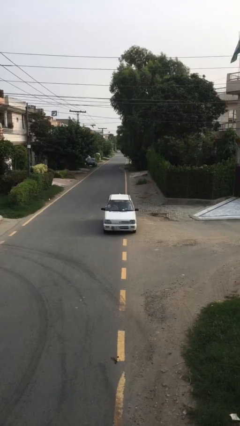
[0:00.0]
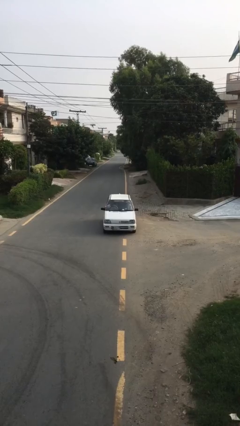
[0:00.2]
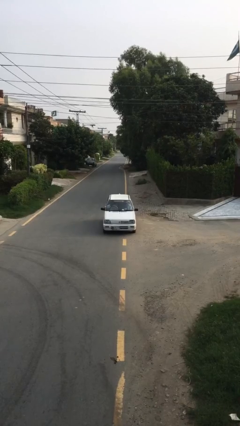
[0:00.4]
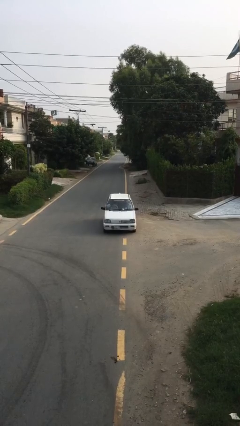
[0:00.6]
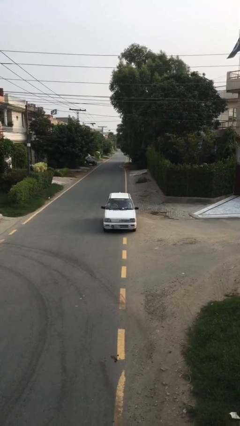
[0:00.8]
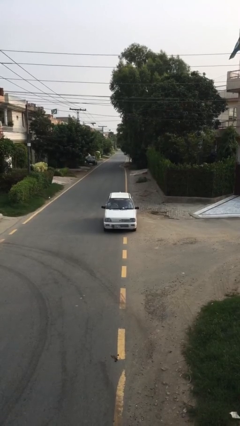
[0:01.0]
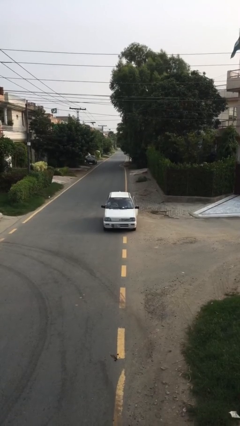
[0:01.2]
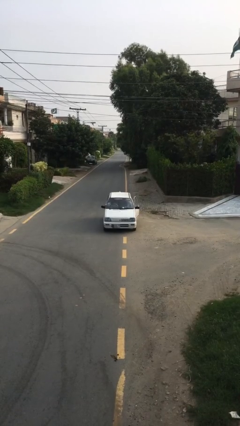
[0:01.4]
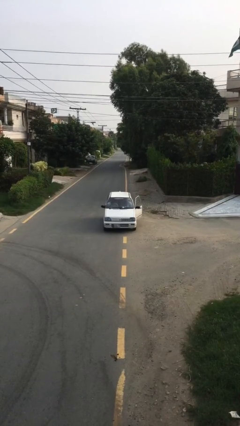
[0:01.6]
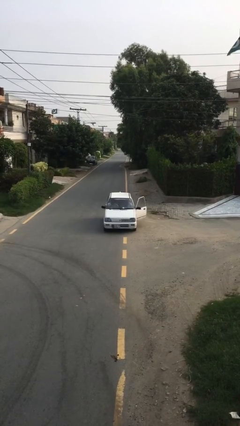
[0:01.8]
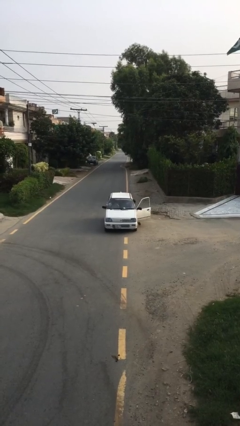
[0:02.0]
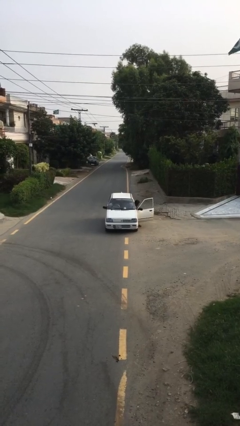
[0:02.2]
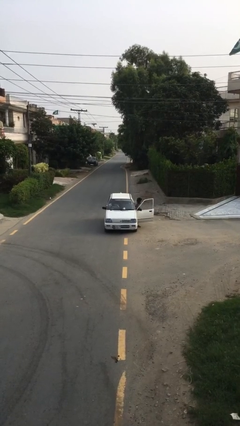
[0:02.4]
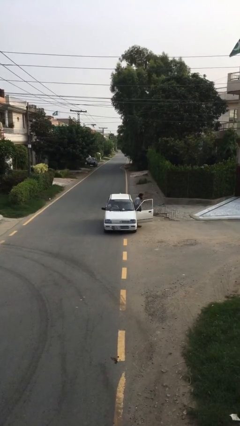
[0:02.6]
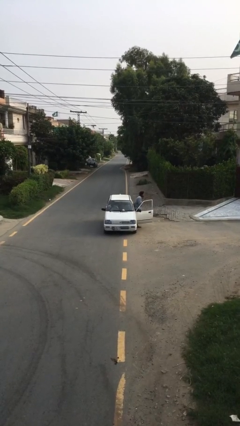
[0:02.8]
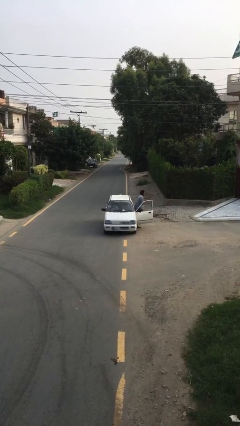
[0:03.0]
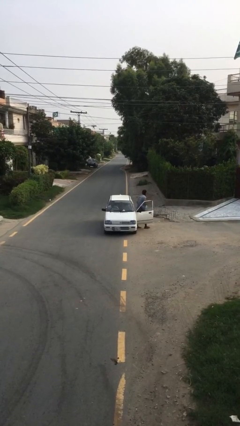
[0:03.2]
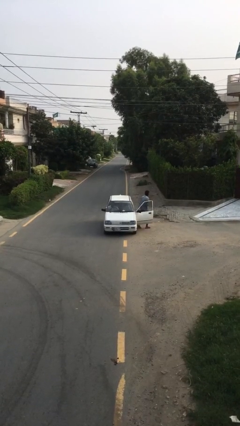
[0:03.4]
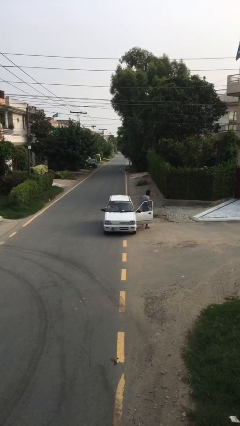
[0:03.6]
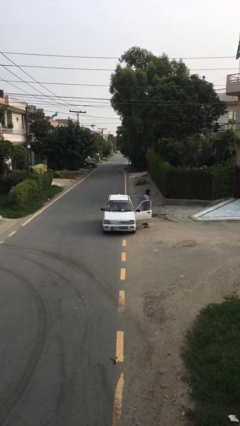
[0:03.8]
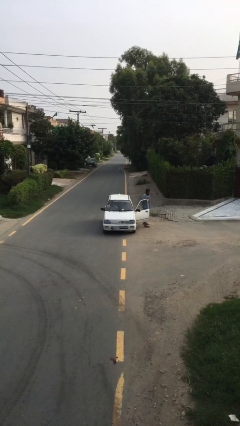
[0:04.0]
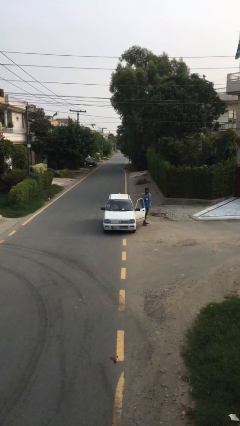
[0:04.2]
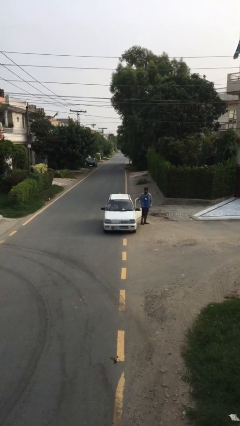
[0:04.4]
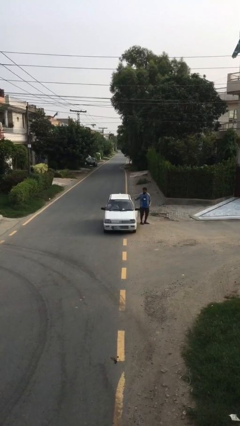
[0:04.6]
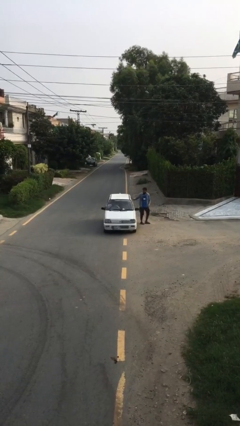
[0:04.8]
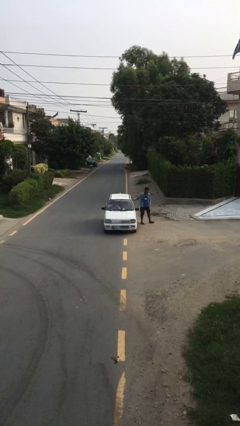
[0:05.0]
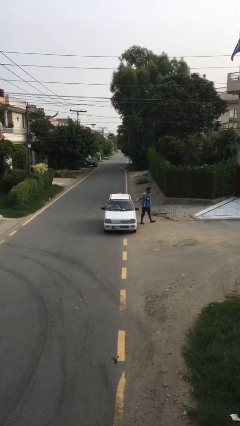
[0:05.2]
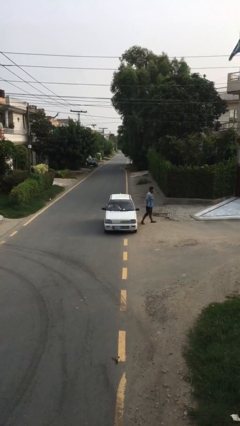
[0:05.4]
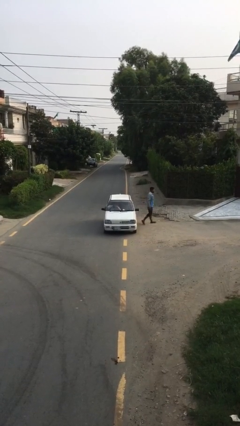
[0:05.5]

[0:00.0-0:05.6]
car drops off person

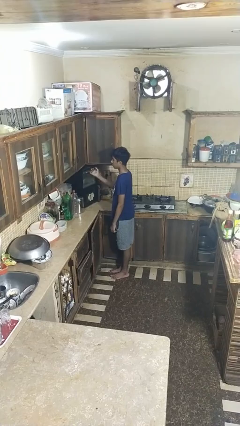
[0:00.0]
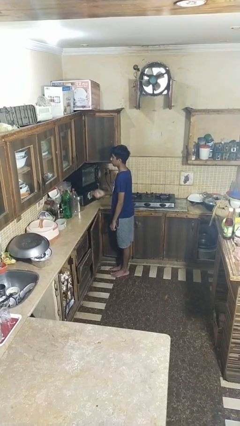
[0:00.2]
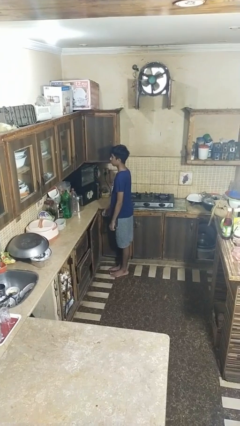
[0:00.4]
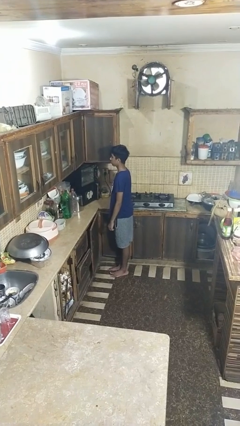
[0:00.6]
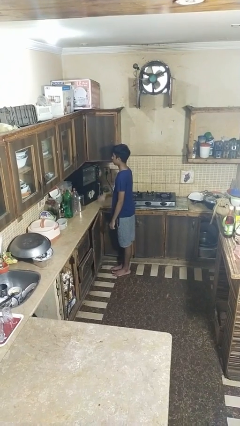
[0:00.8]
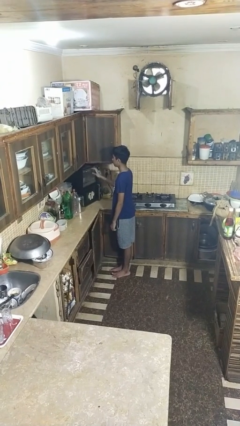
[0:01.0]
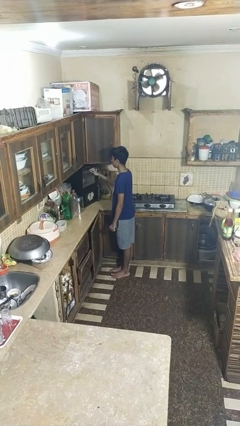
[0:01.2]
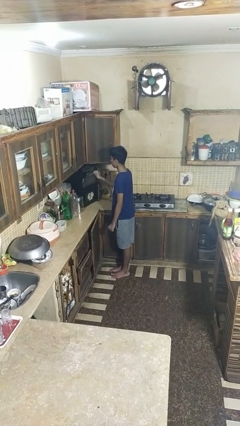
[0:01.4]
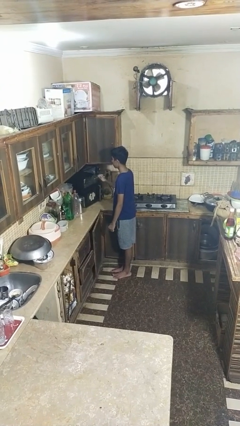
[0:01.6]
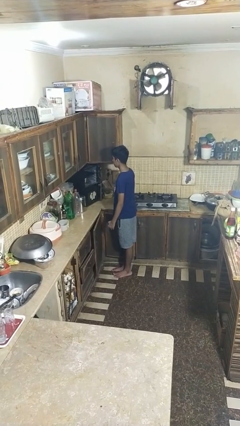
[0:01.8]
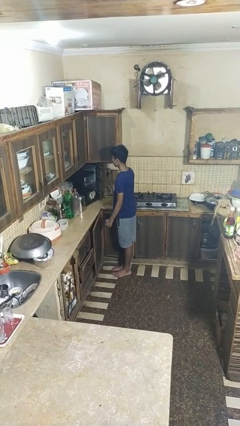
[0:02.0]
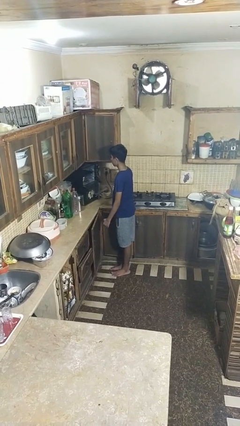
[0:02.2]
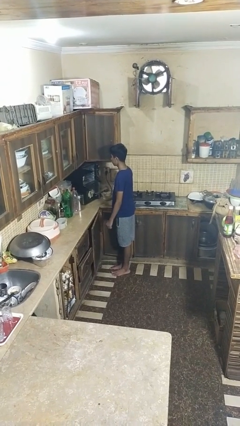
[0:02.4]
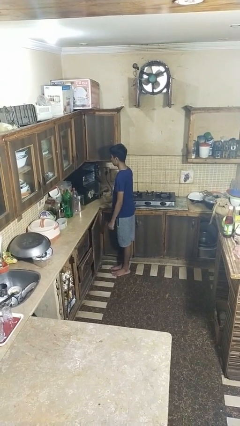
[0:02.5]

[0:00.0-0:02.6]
person opens oven door

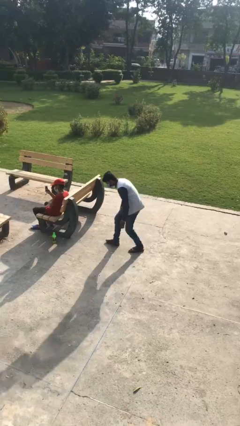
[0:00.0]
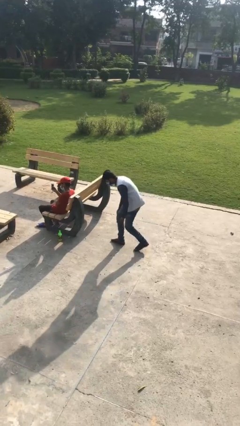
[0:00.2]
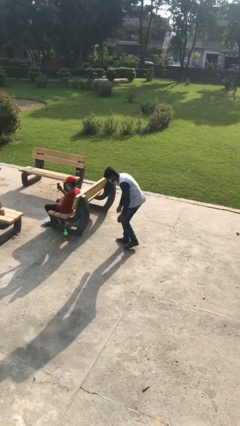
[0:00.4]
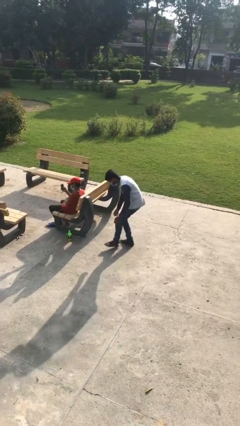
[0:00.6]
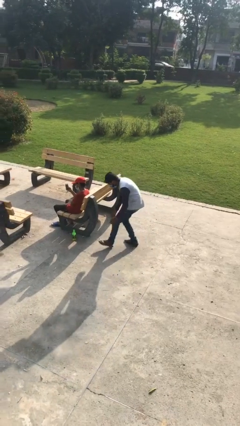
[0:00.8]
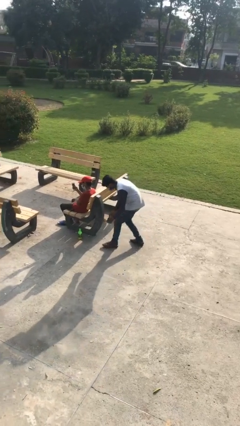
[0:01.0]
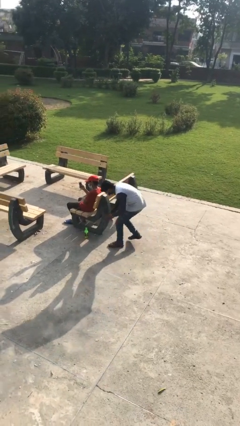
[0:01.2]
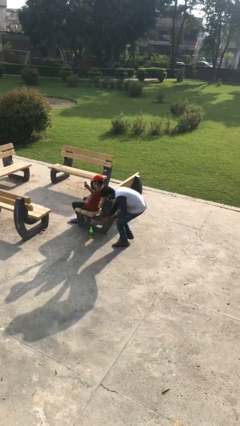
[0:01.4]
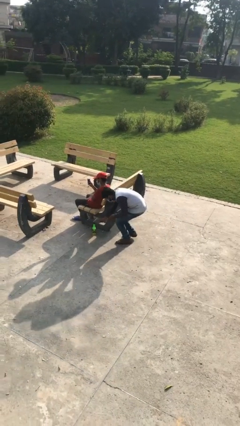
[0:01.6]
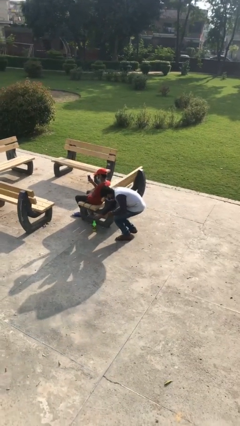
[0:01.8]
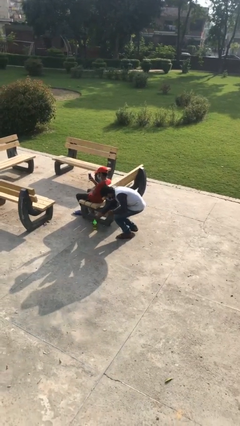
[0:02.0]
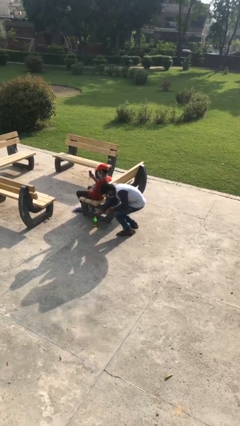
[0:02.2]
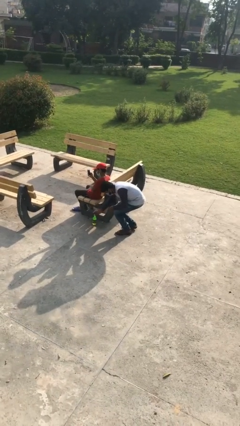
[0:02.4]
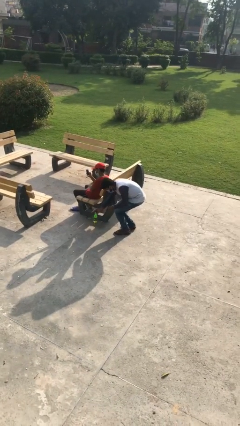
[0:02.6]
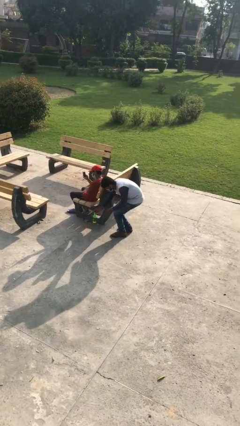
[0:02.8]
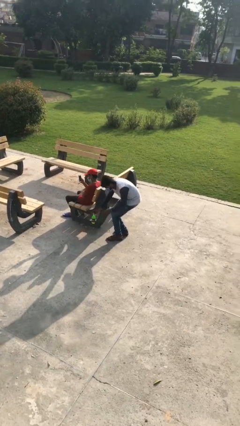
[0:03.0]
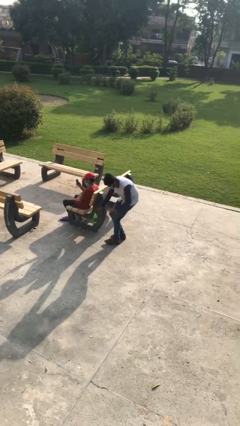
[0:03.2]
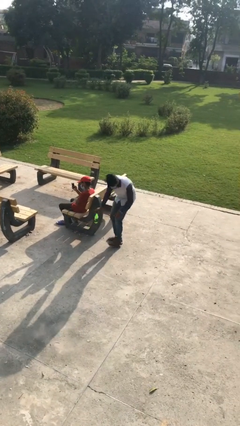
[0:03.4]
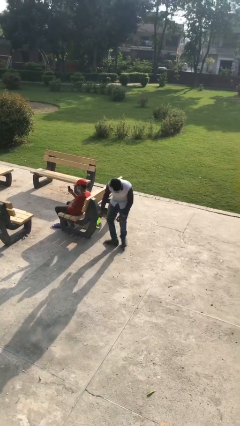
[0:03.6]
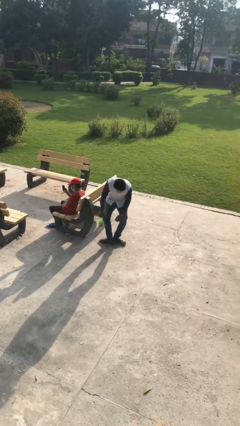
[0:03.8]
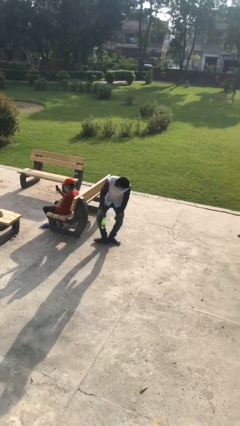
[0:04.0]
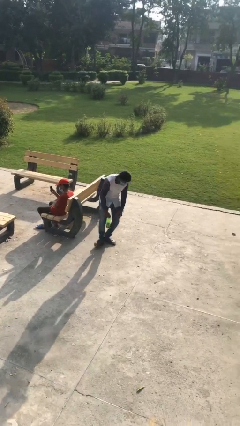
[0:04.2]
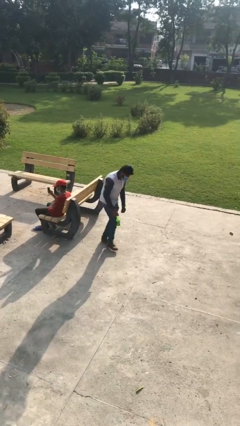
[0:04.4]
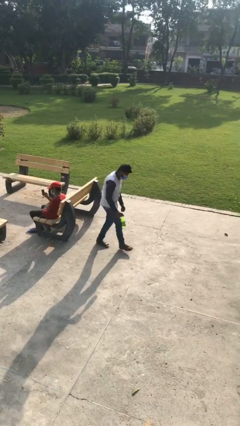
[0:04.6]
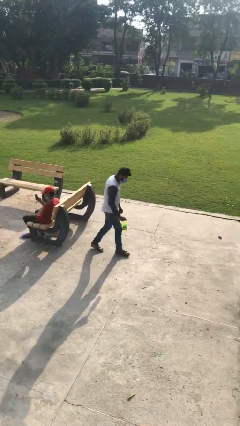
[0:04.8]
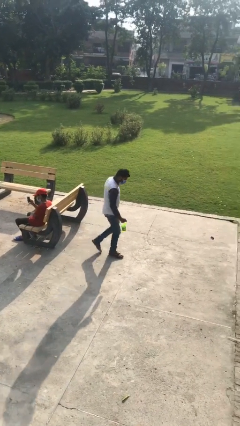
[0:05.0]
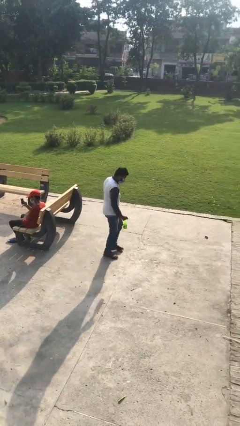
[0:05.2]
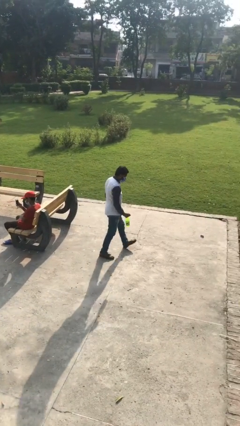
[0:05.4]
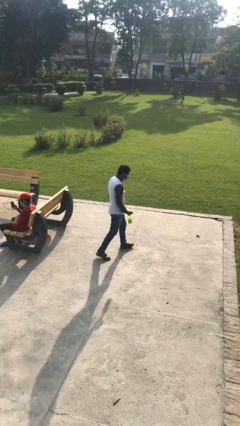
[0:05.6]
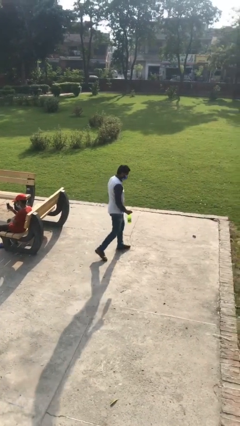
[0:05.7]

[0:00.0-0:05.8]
person steals object from person

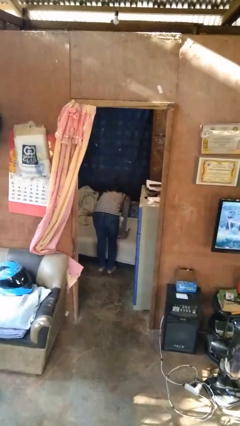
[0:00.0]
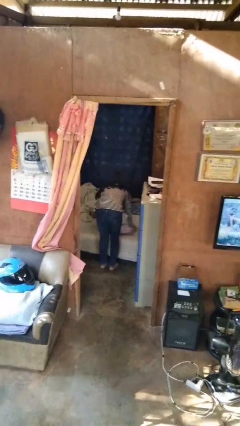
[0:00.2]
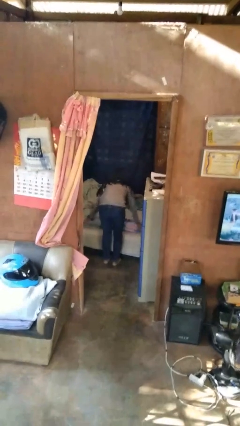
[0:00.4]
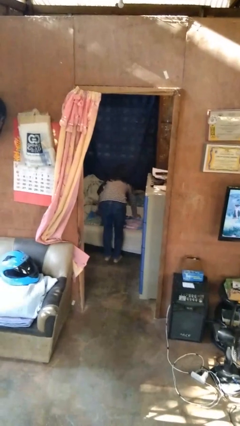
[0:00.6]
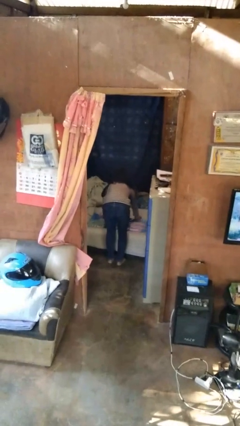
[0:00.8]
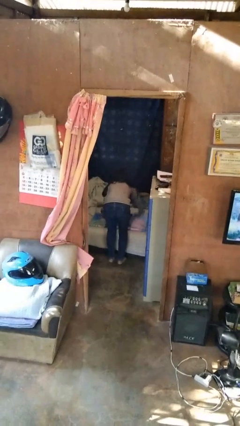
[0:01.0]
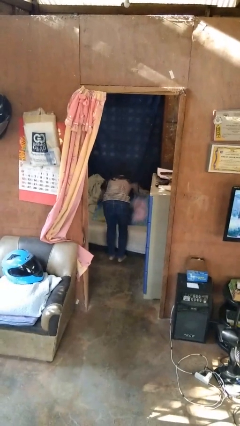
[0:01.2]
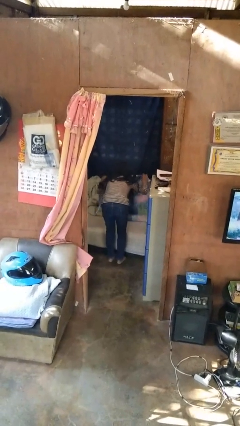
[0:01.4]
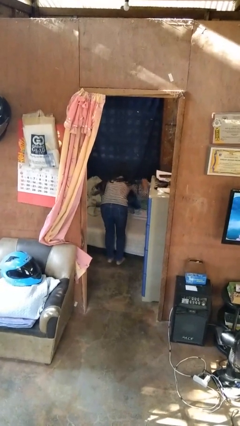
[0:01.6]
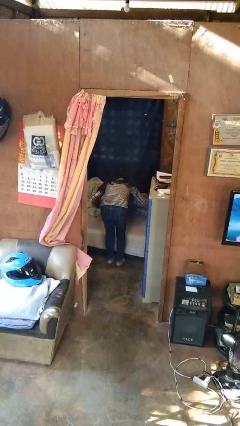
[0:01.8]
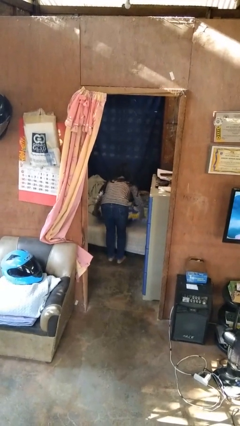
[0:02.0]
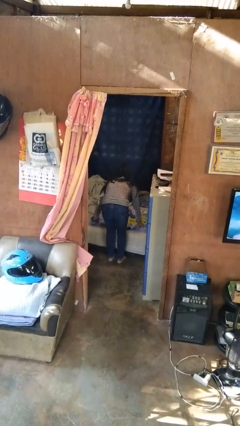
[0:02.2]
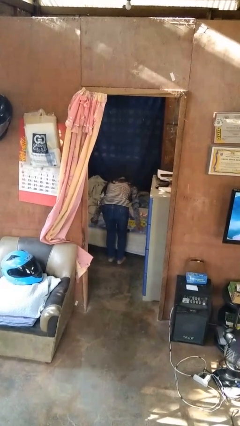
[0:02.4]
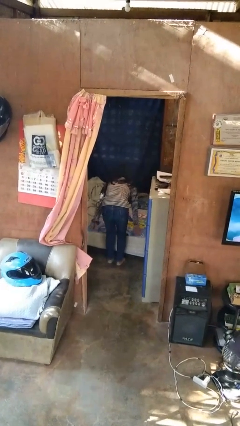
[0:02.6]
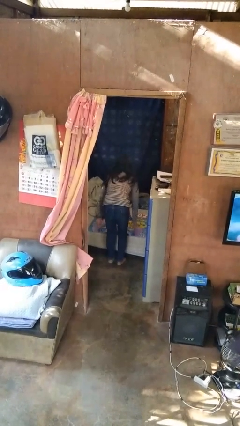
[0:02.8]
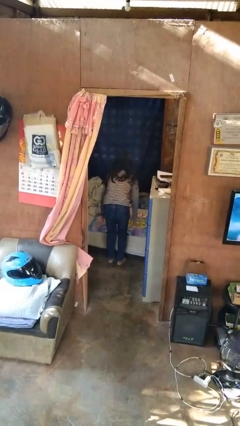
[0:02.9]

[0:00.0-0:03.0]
person unfolds blanket

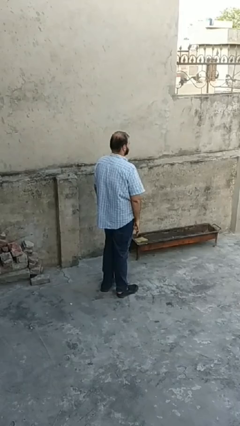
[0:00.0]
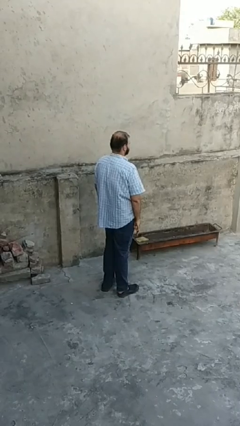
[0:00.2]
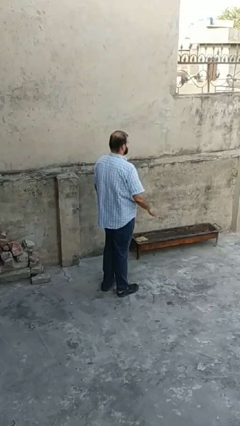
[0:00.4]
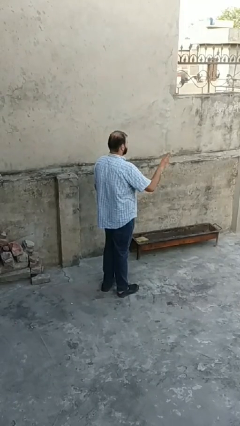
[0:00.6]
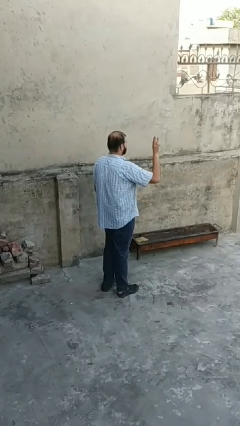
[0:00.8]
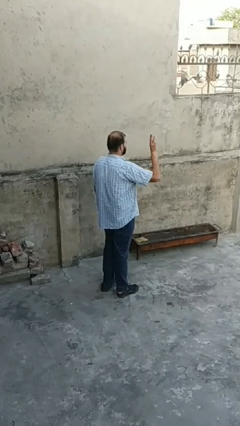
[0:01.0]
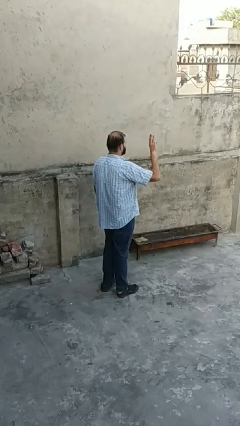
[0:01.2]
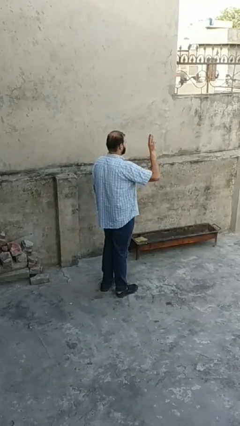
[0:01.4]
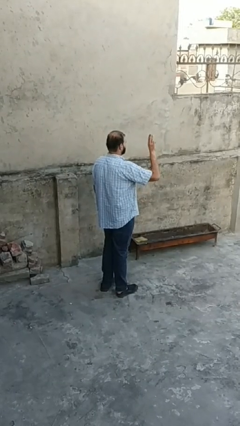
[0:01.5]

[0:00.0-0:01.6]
person gestures number three
